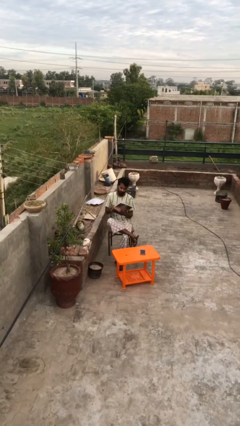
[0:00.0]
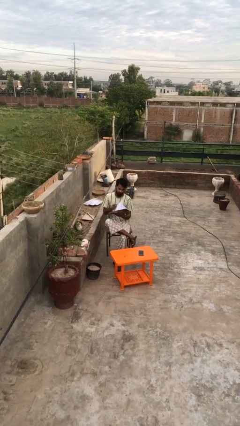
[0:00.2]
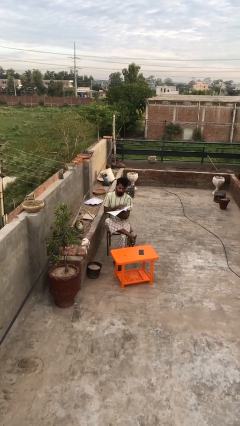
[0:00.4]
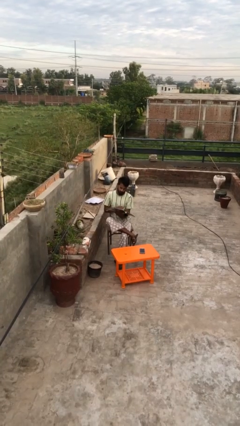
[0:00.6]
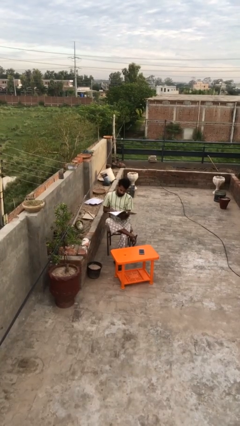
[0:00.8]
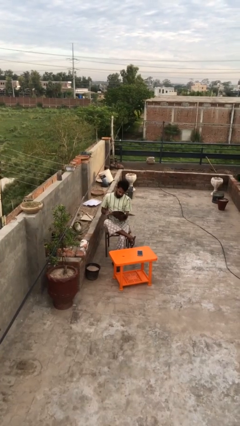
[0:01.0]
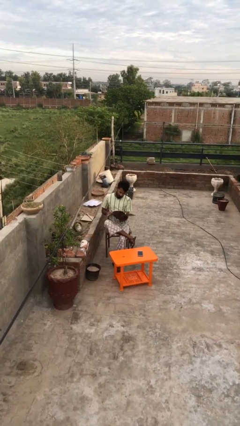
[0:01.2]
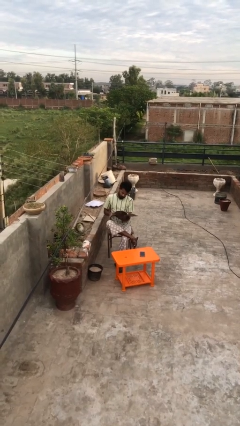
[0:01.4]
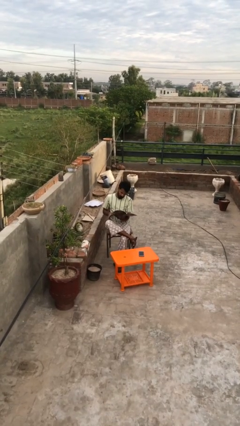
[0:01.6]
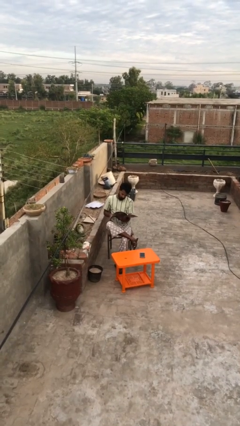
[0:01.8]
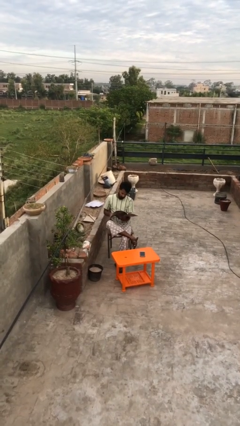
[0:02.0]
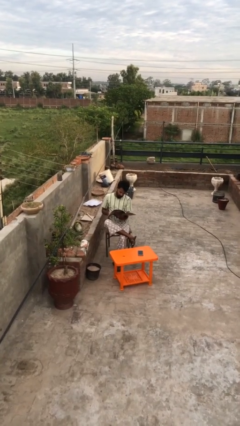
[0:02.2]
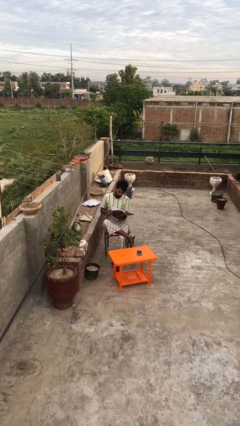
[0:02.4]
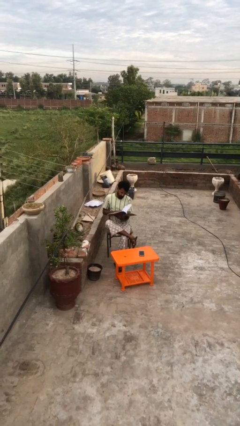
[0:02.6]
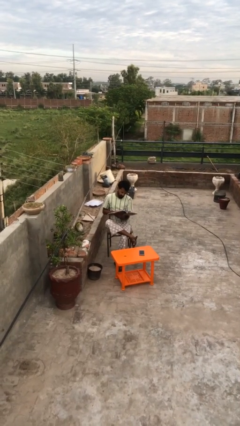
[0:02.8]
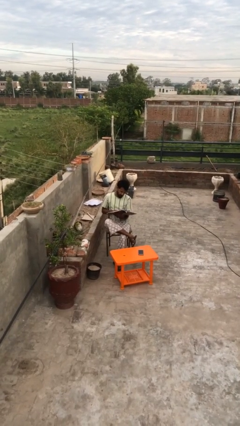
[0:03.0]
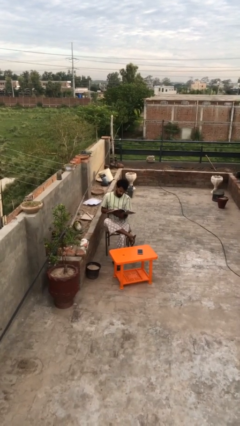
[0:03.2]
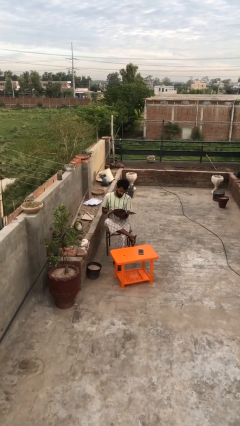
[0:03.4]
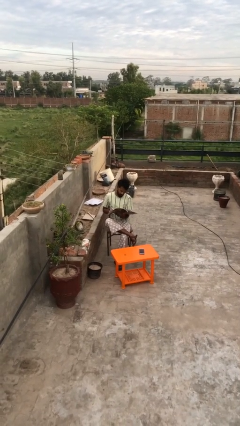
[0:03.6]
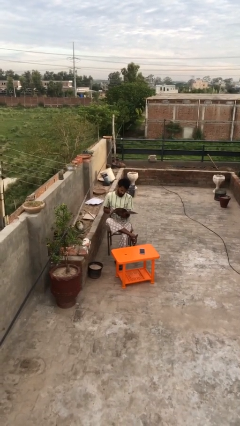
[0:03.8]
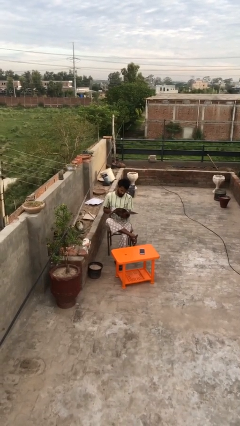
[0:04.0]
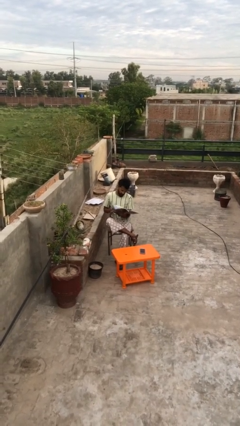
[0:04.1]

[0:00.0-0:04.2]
person reads document

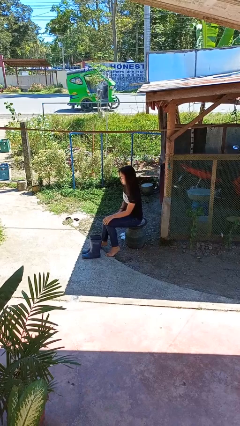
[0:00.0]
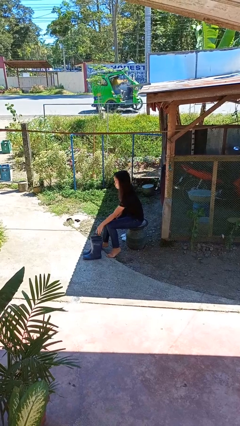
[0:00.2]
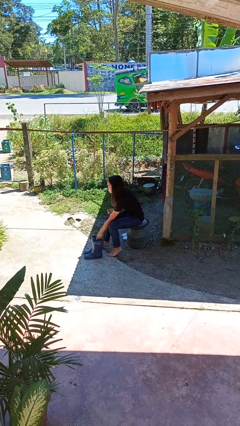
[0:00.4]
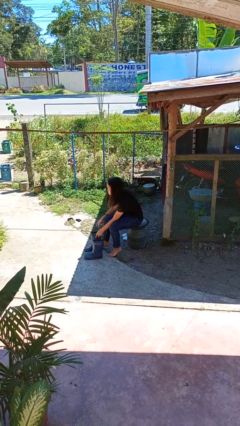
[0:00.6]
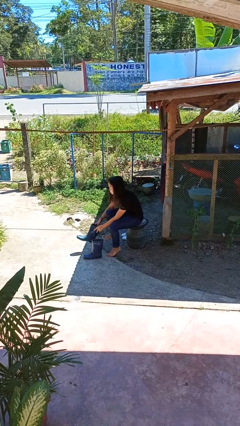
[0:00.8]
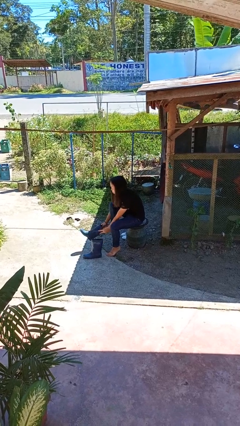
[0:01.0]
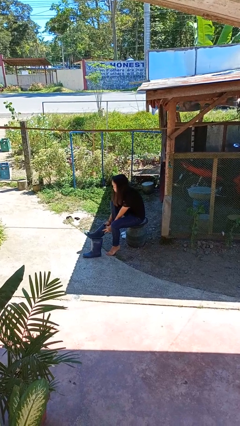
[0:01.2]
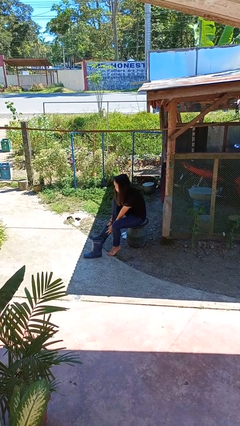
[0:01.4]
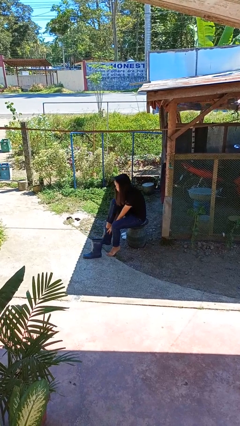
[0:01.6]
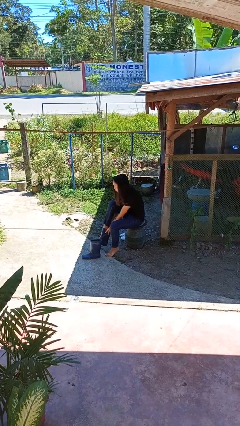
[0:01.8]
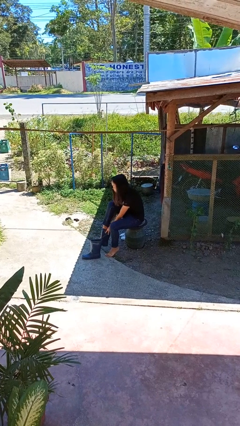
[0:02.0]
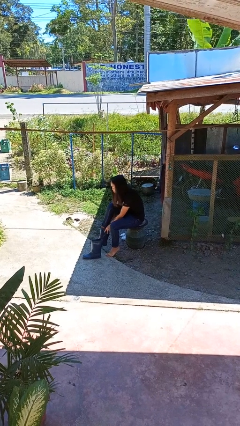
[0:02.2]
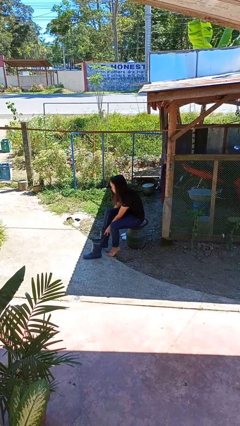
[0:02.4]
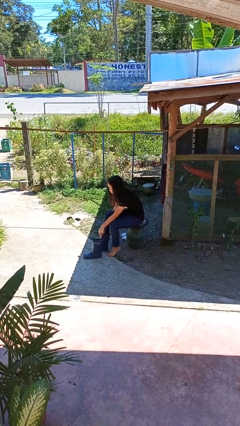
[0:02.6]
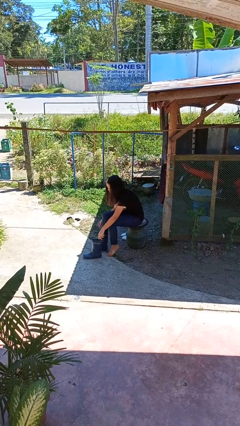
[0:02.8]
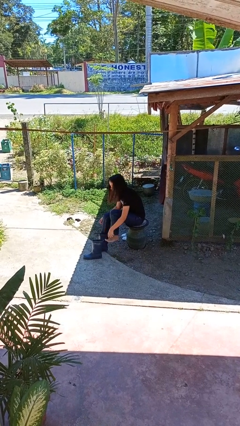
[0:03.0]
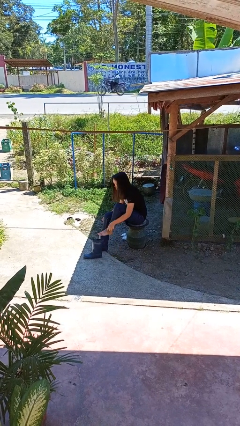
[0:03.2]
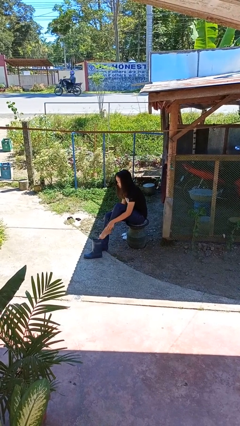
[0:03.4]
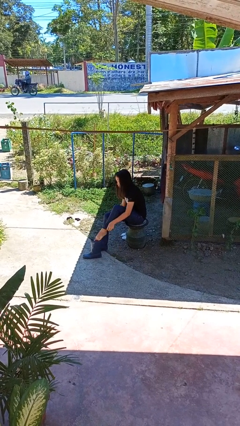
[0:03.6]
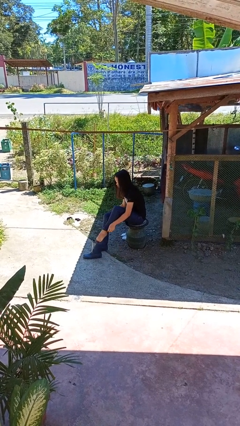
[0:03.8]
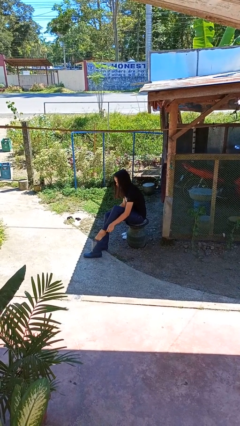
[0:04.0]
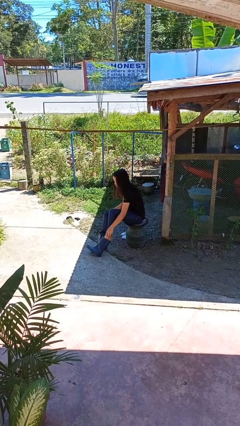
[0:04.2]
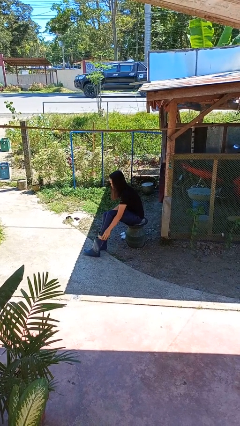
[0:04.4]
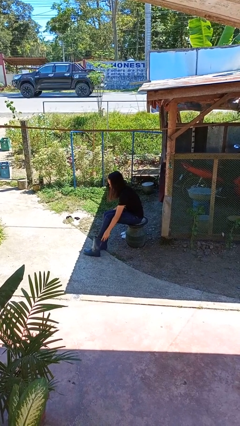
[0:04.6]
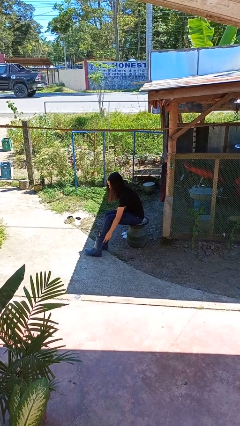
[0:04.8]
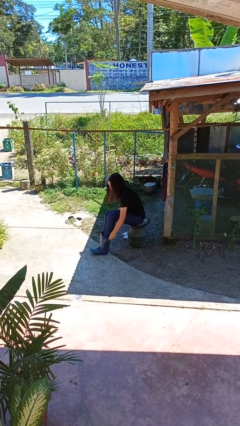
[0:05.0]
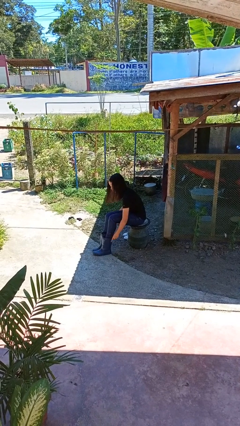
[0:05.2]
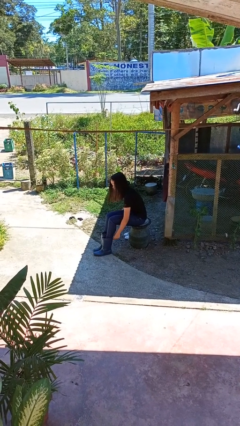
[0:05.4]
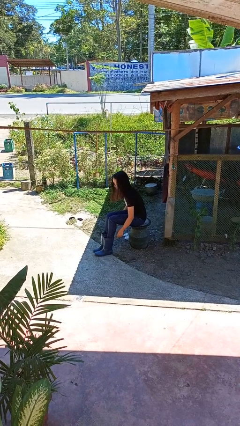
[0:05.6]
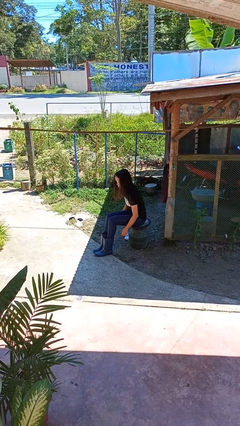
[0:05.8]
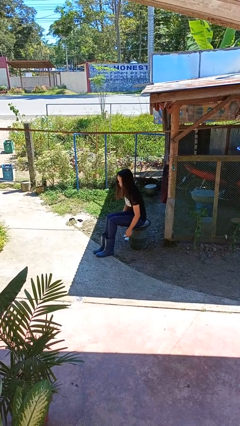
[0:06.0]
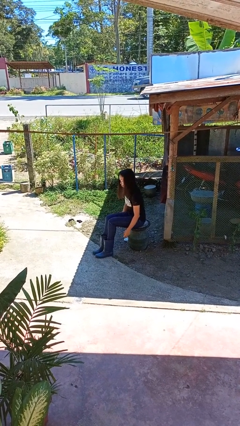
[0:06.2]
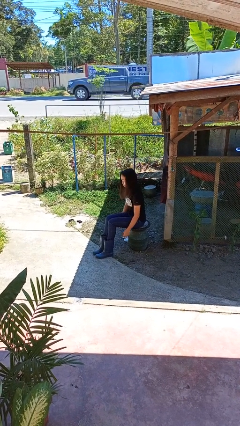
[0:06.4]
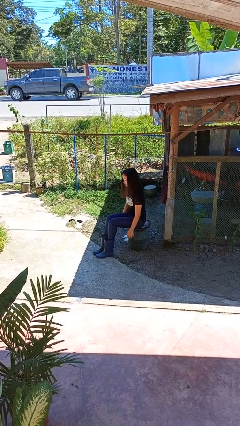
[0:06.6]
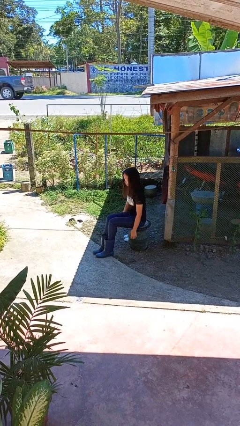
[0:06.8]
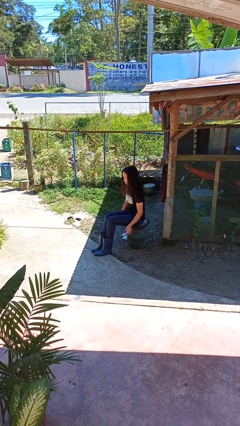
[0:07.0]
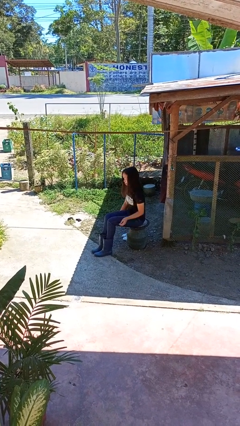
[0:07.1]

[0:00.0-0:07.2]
person puts on boots

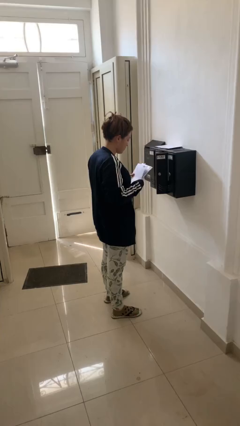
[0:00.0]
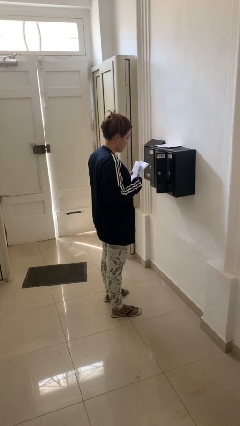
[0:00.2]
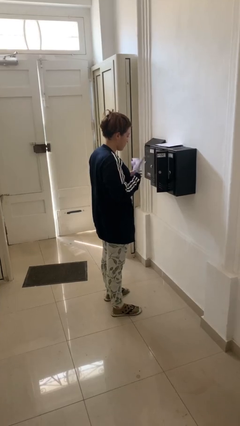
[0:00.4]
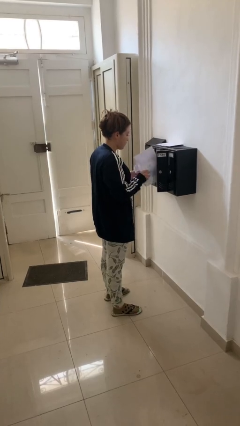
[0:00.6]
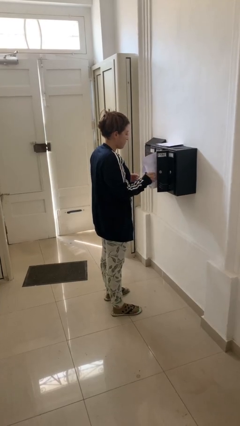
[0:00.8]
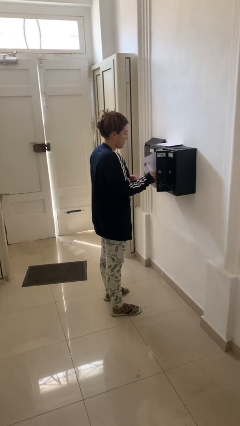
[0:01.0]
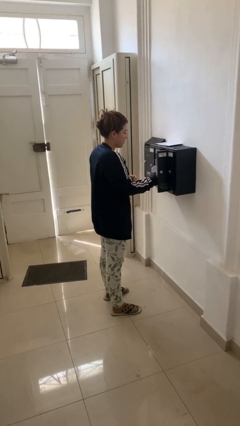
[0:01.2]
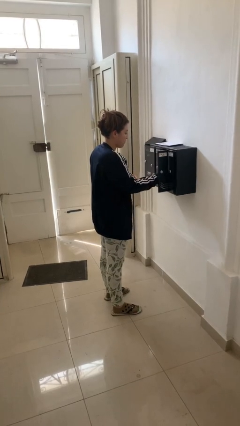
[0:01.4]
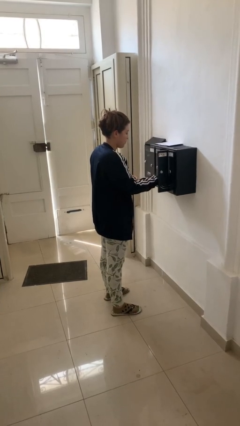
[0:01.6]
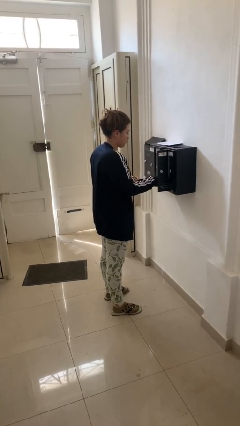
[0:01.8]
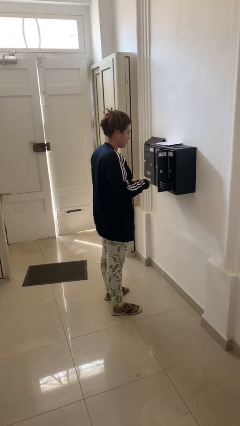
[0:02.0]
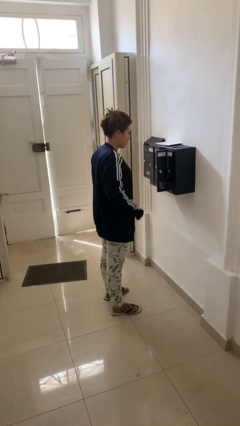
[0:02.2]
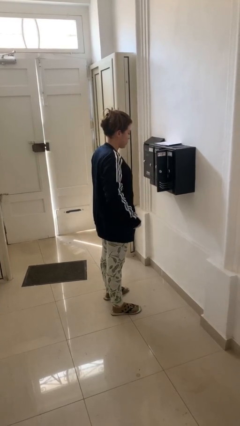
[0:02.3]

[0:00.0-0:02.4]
person puts letters in mailbox

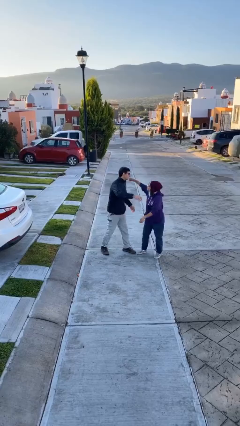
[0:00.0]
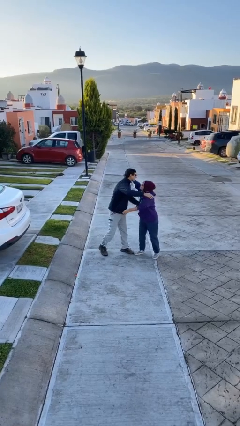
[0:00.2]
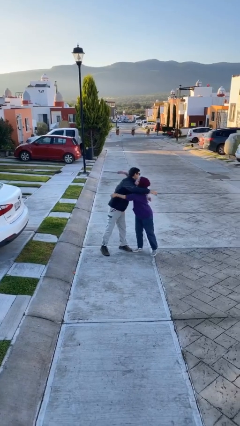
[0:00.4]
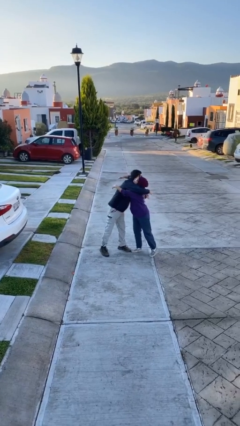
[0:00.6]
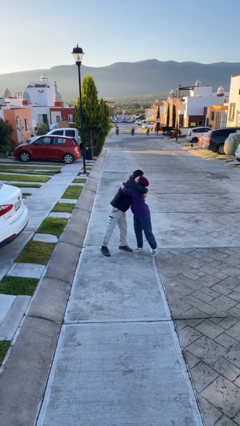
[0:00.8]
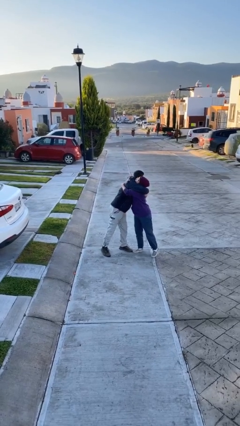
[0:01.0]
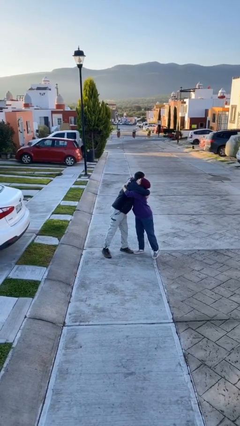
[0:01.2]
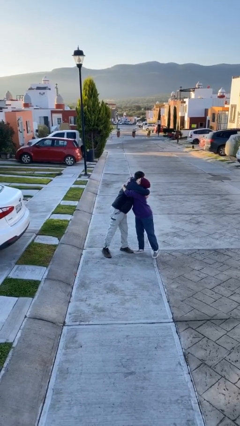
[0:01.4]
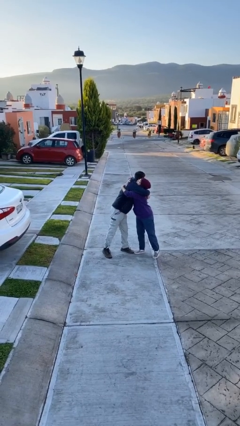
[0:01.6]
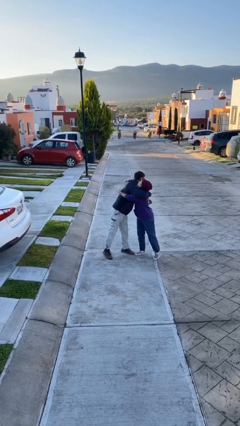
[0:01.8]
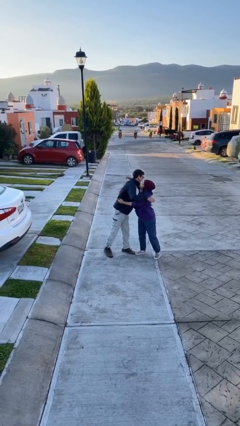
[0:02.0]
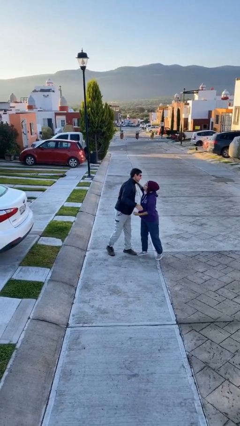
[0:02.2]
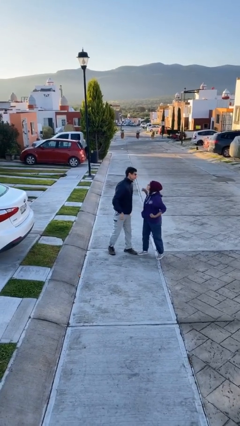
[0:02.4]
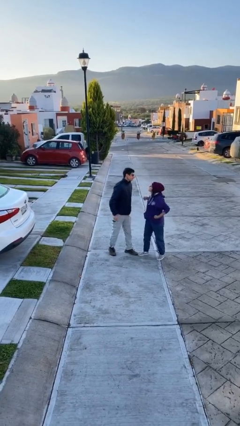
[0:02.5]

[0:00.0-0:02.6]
person embraces person

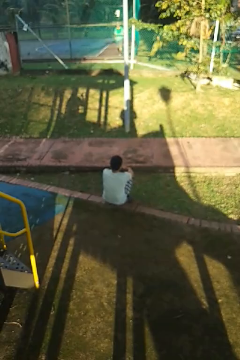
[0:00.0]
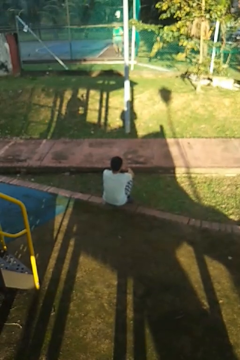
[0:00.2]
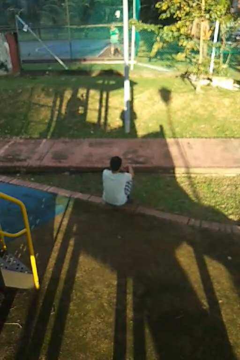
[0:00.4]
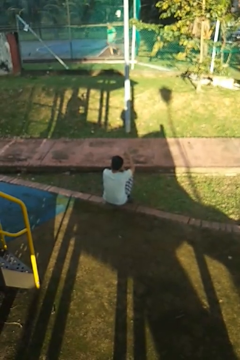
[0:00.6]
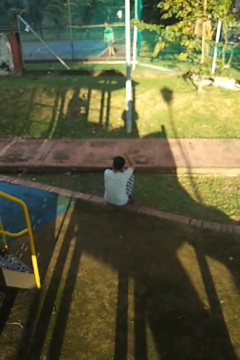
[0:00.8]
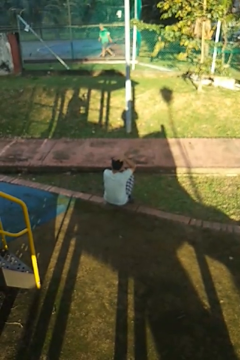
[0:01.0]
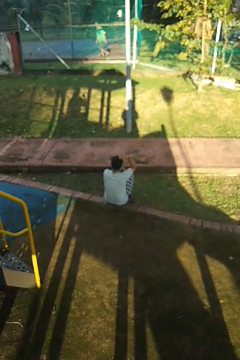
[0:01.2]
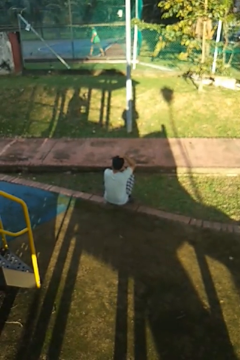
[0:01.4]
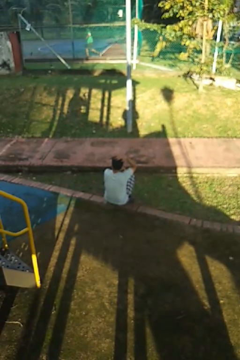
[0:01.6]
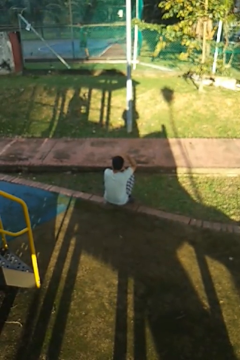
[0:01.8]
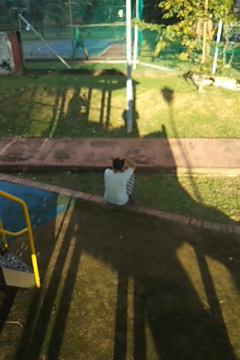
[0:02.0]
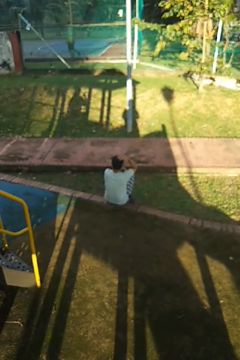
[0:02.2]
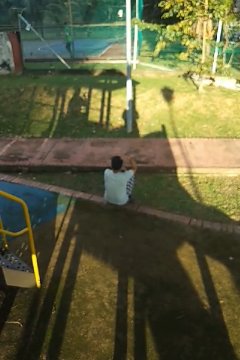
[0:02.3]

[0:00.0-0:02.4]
person pats head
